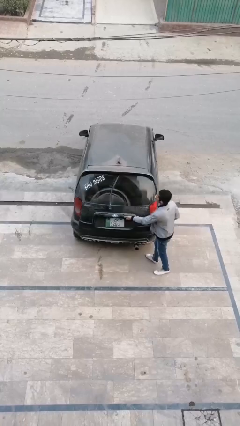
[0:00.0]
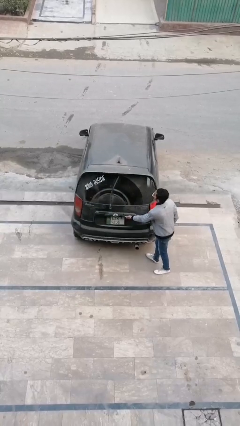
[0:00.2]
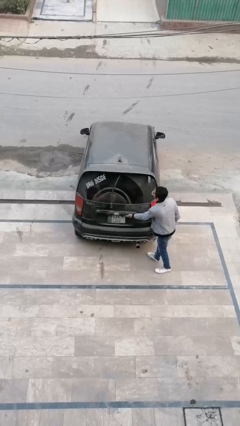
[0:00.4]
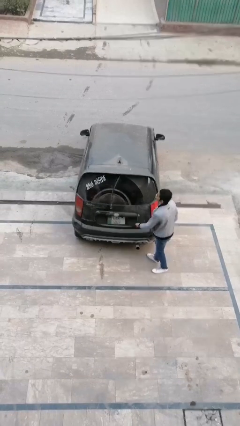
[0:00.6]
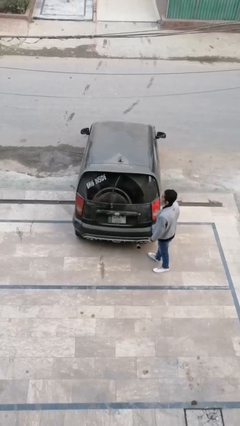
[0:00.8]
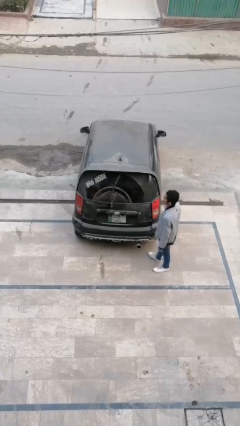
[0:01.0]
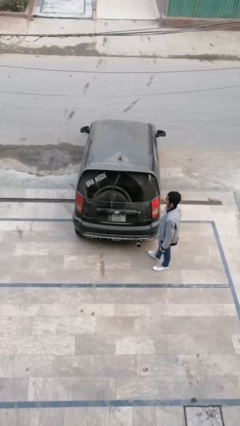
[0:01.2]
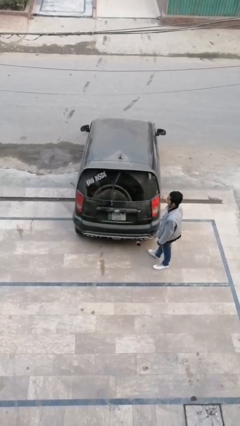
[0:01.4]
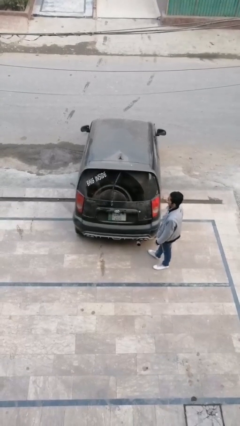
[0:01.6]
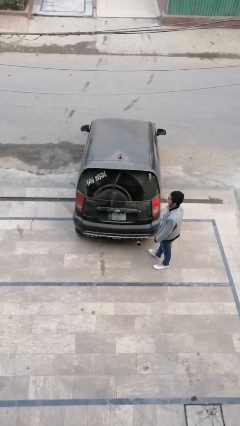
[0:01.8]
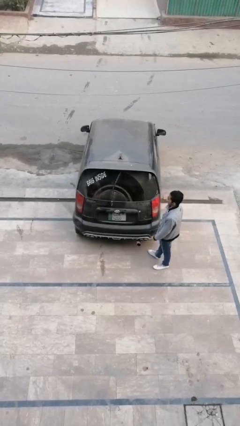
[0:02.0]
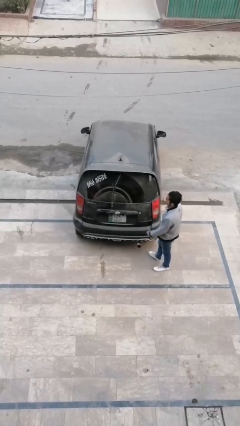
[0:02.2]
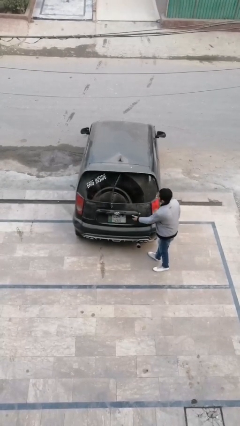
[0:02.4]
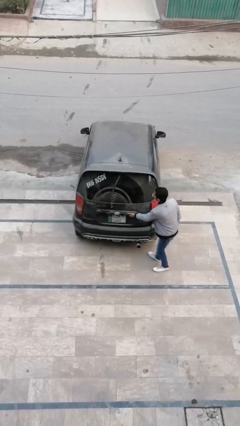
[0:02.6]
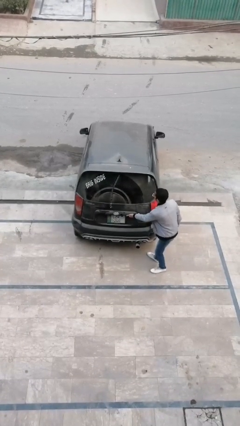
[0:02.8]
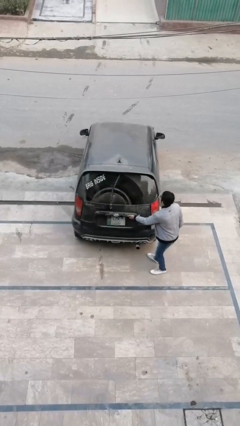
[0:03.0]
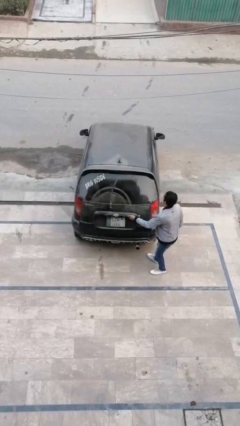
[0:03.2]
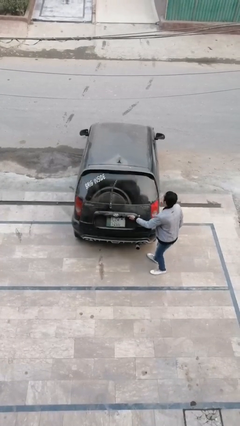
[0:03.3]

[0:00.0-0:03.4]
person closes car trunk

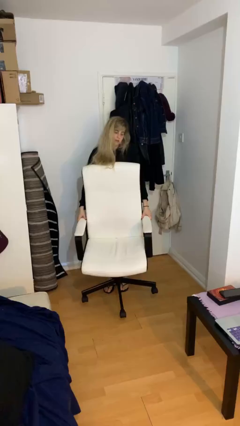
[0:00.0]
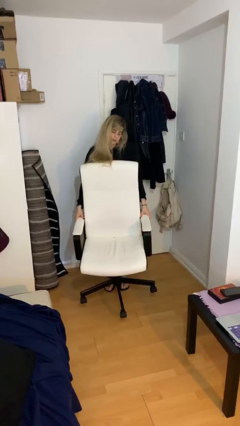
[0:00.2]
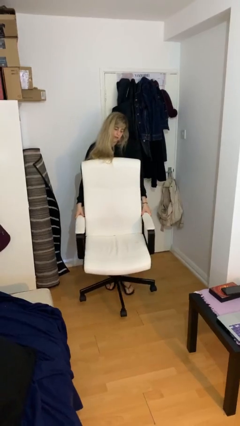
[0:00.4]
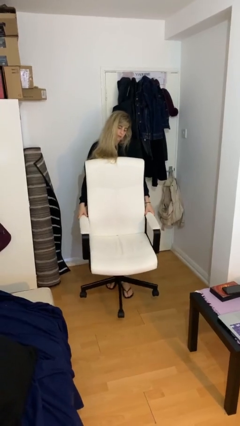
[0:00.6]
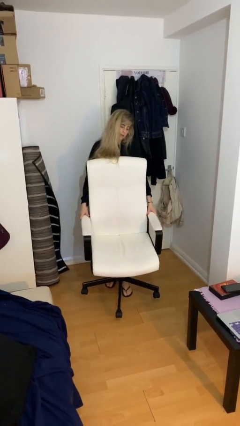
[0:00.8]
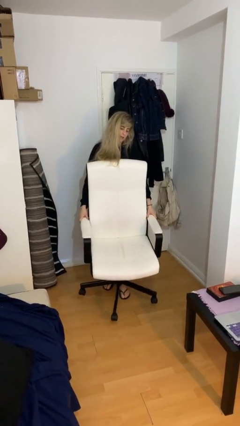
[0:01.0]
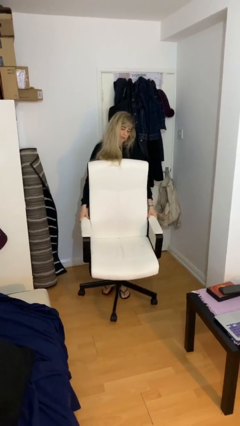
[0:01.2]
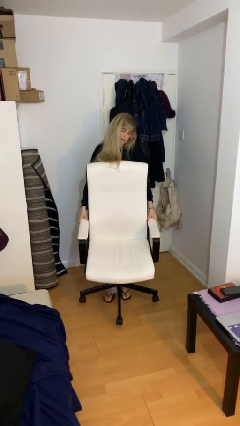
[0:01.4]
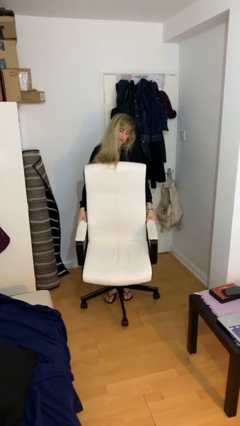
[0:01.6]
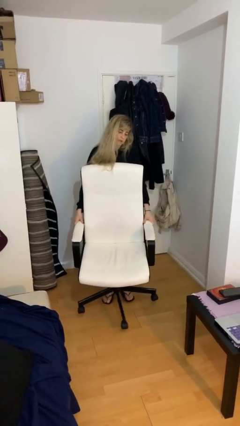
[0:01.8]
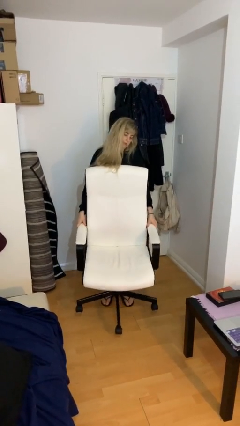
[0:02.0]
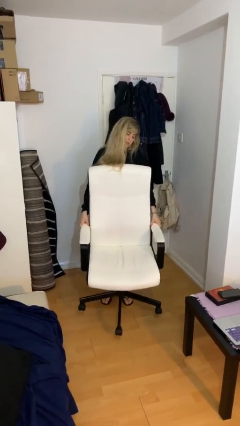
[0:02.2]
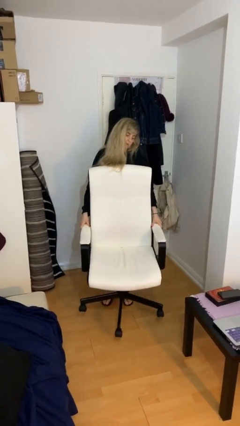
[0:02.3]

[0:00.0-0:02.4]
person carries heavy object

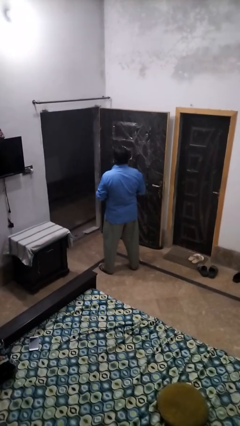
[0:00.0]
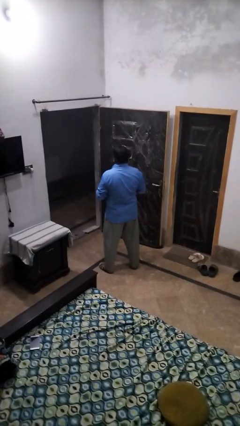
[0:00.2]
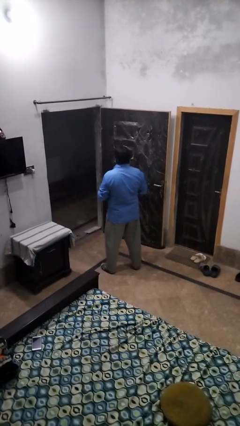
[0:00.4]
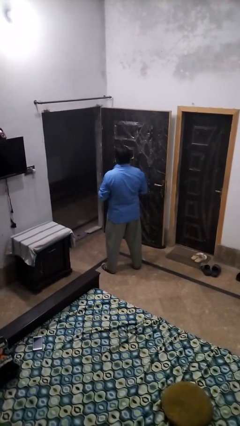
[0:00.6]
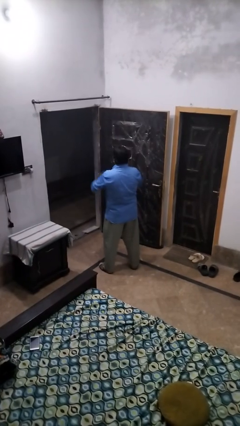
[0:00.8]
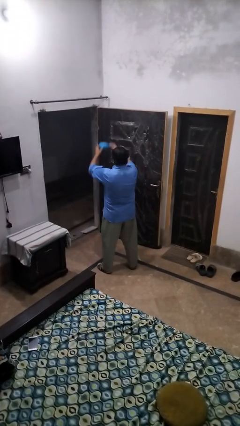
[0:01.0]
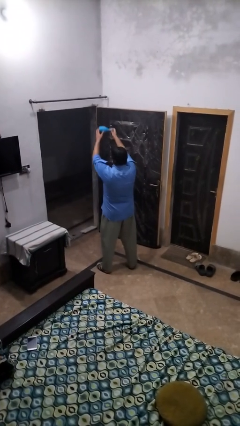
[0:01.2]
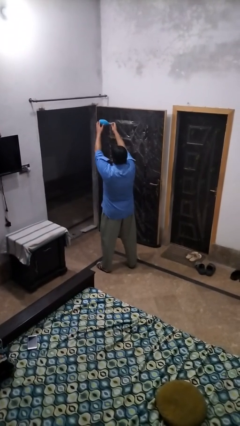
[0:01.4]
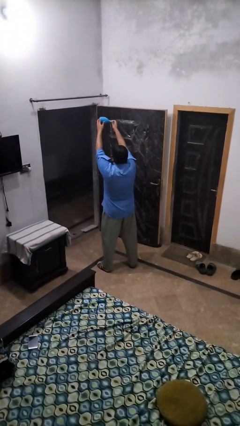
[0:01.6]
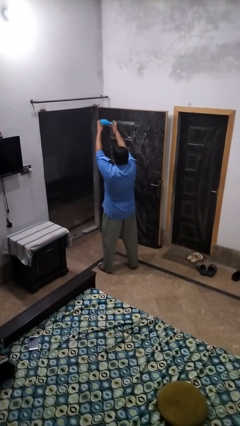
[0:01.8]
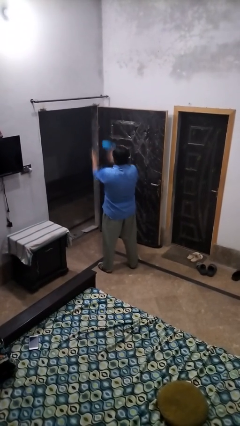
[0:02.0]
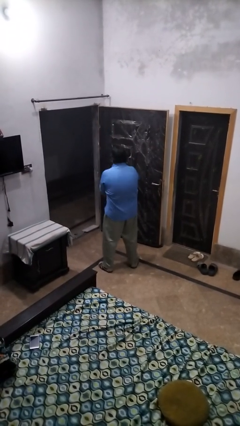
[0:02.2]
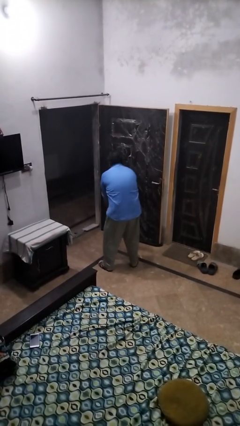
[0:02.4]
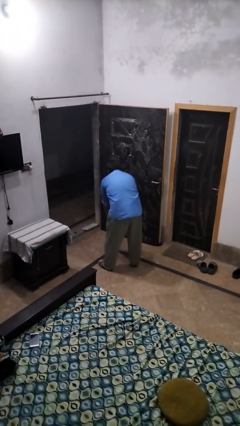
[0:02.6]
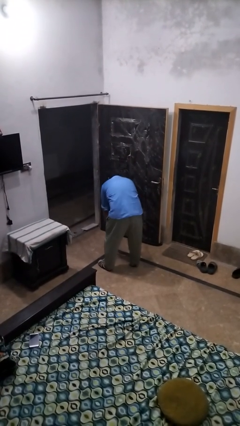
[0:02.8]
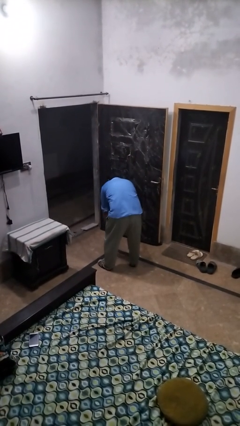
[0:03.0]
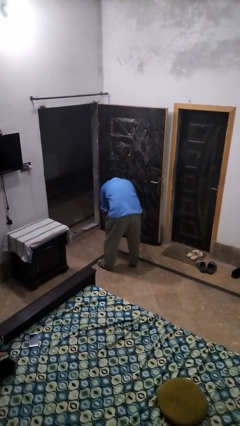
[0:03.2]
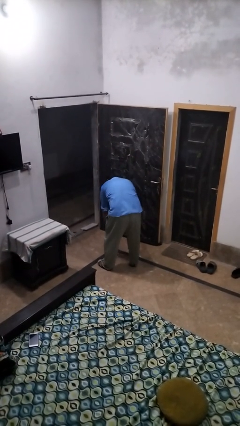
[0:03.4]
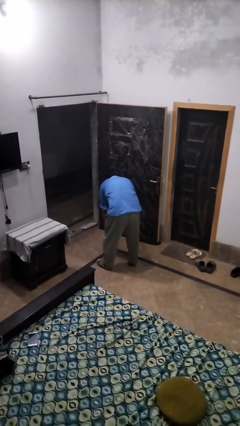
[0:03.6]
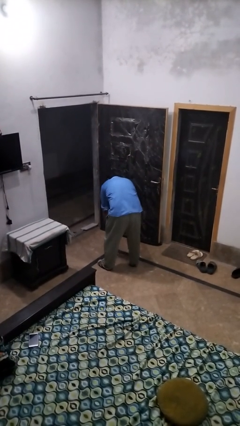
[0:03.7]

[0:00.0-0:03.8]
person drops object

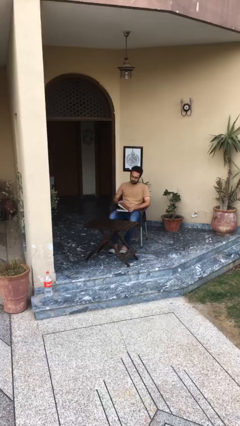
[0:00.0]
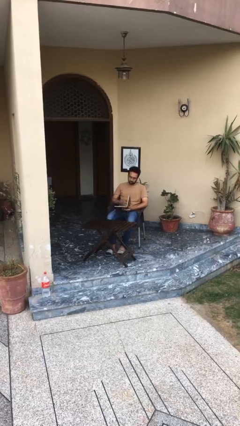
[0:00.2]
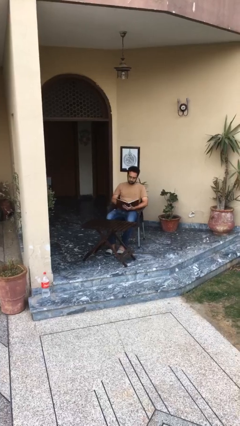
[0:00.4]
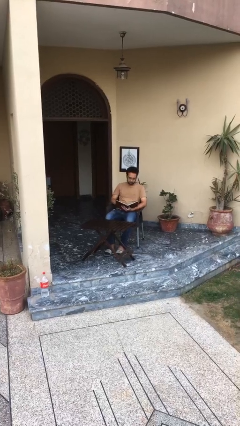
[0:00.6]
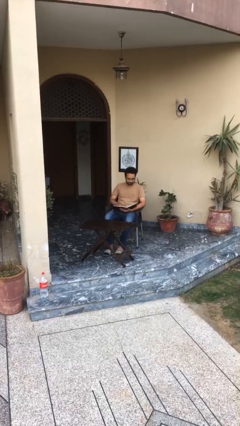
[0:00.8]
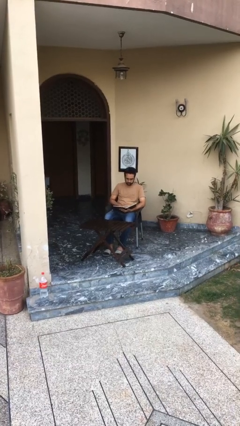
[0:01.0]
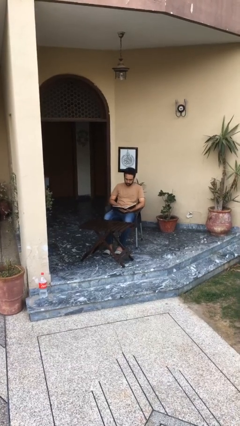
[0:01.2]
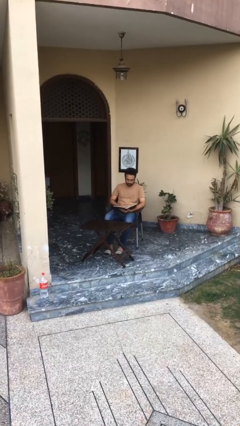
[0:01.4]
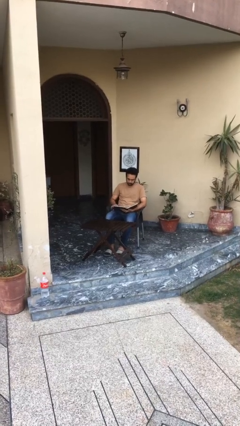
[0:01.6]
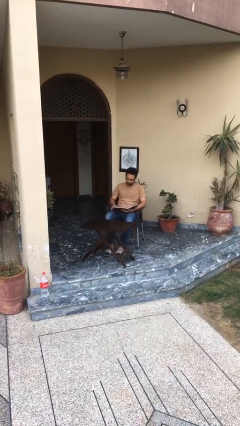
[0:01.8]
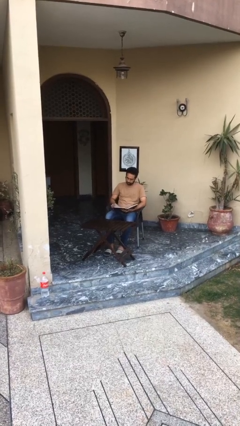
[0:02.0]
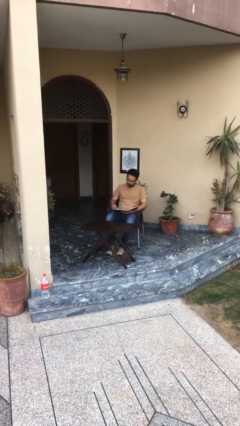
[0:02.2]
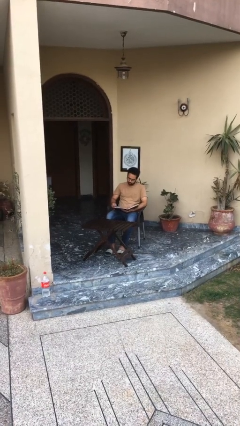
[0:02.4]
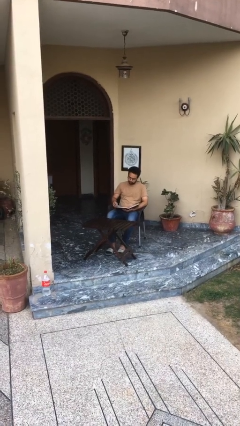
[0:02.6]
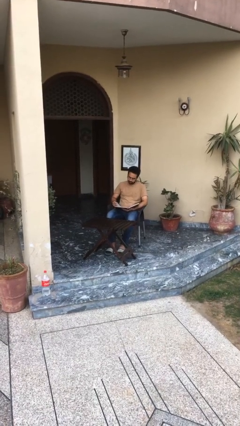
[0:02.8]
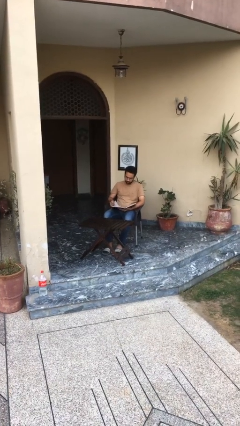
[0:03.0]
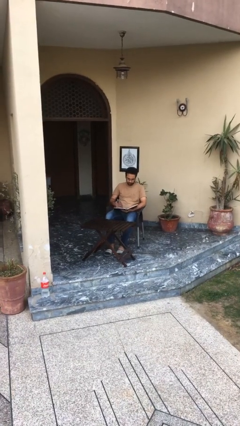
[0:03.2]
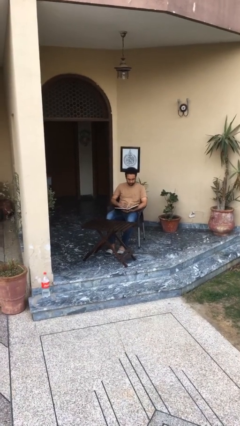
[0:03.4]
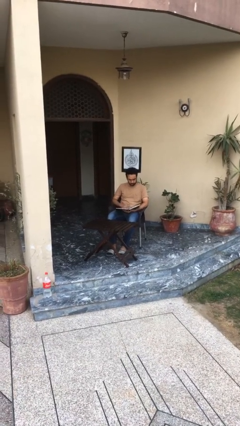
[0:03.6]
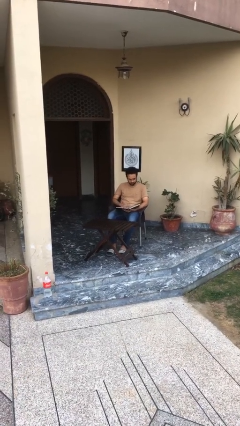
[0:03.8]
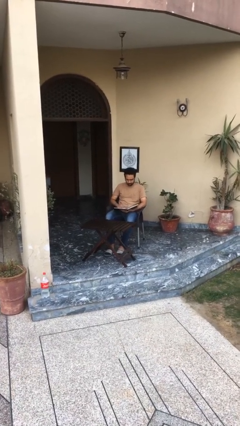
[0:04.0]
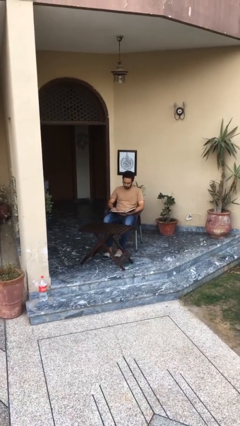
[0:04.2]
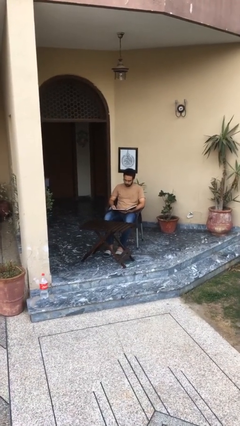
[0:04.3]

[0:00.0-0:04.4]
person reads document

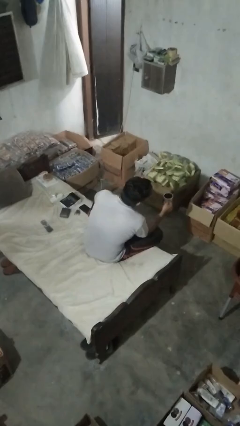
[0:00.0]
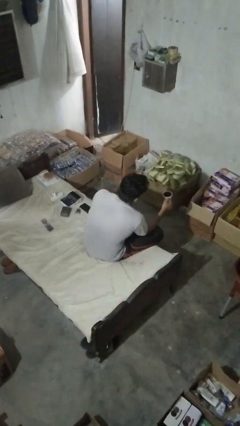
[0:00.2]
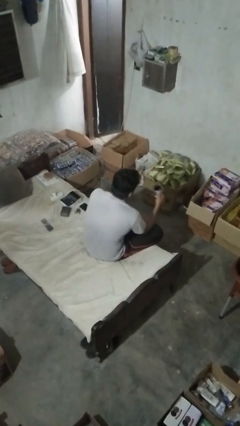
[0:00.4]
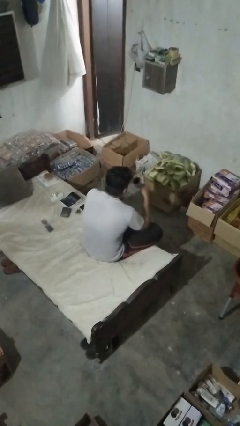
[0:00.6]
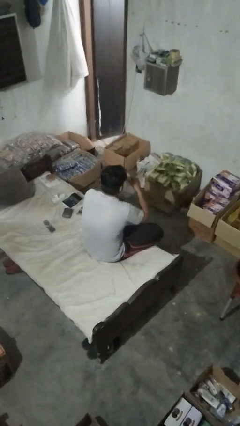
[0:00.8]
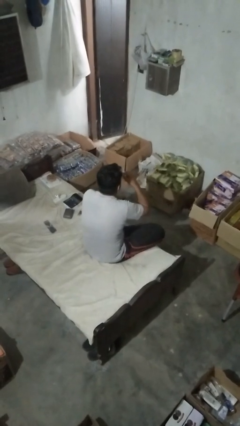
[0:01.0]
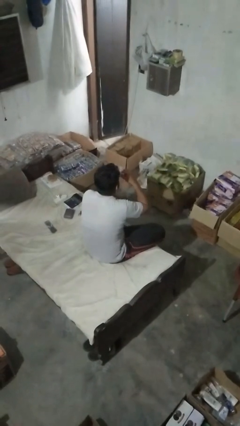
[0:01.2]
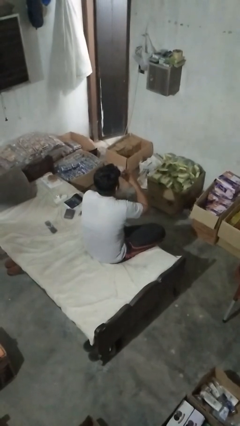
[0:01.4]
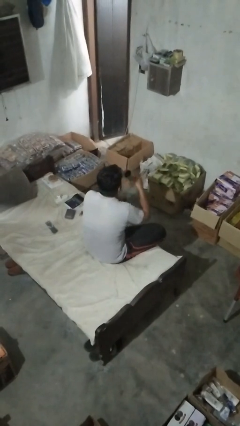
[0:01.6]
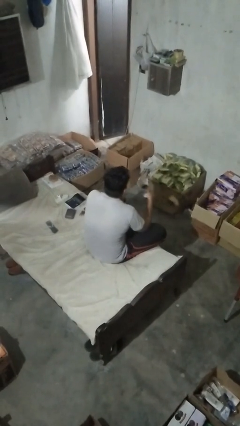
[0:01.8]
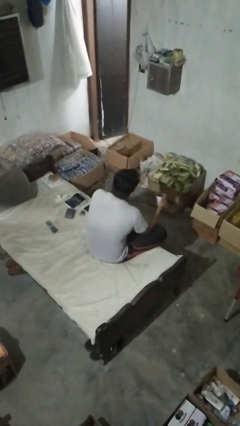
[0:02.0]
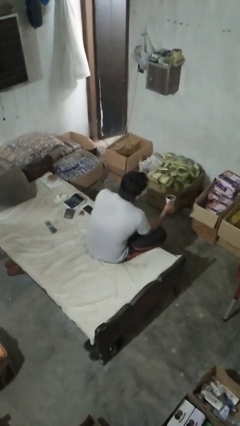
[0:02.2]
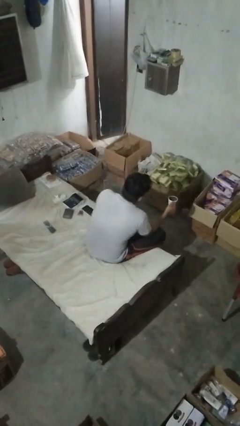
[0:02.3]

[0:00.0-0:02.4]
person drinks from mug

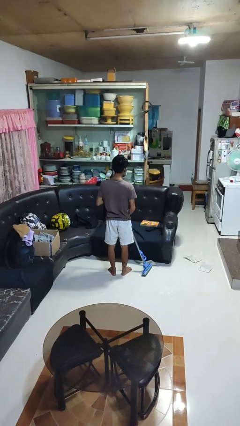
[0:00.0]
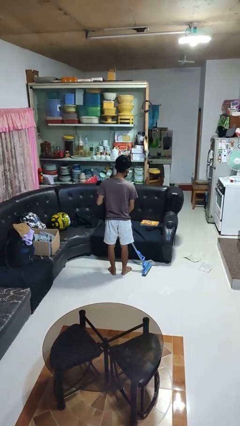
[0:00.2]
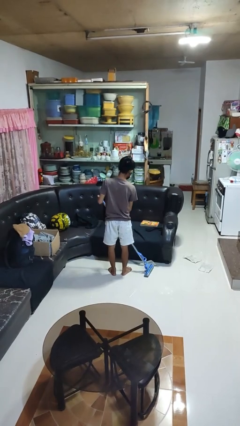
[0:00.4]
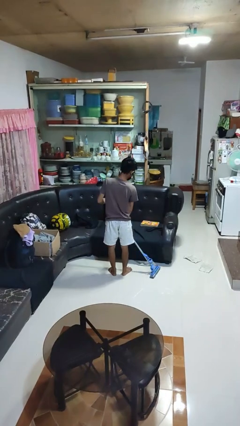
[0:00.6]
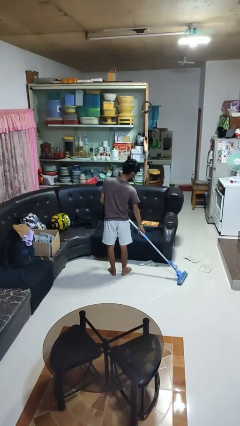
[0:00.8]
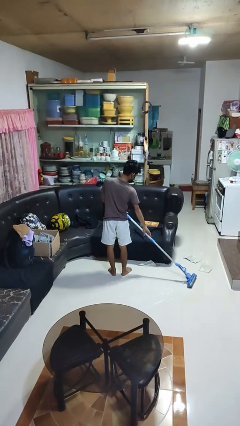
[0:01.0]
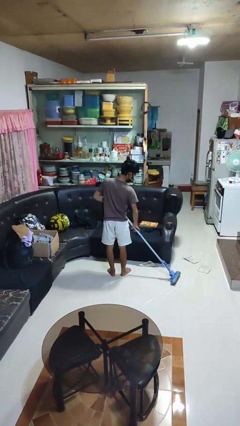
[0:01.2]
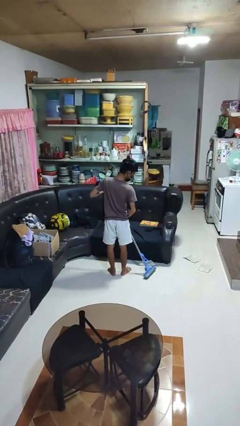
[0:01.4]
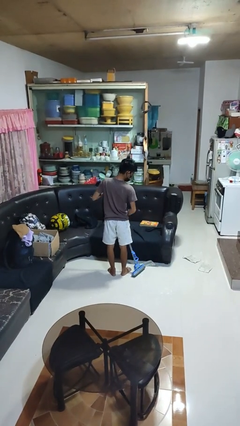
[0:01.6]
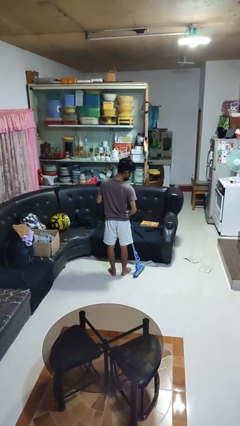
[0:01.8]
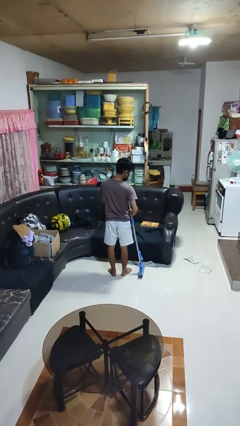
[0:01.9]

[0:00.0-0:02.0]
person mops
